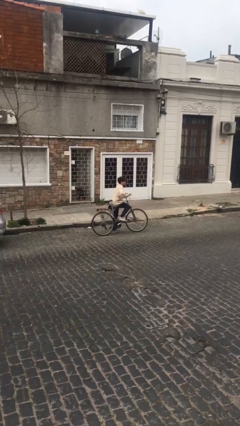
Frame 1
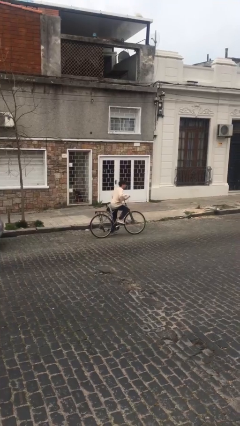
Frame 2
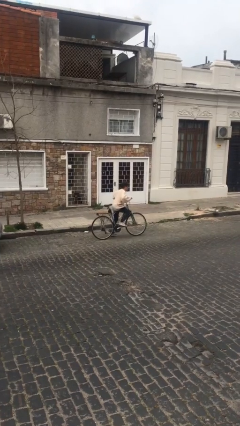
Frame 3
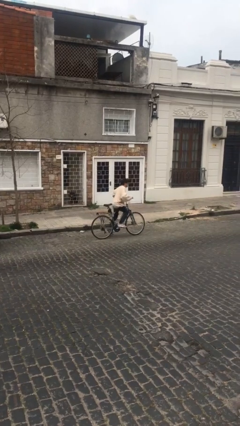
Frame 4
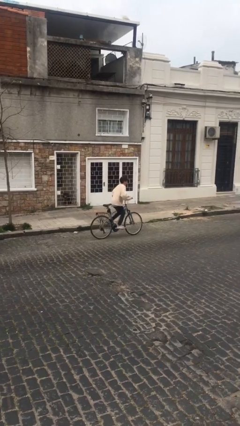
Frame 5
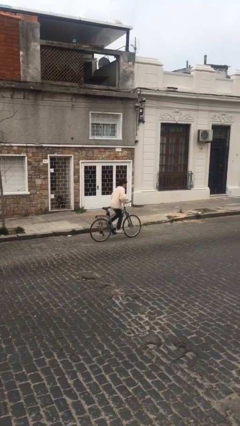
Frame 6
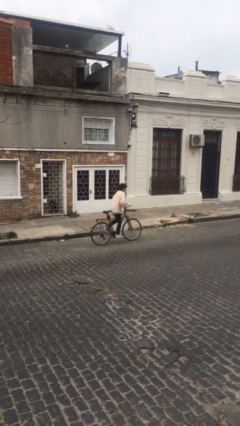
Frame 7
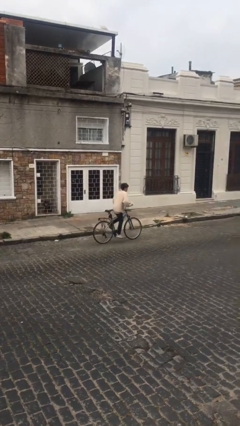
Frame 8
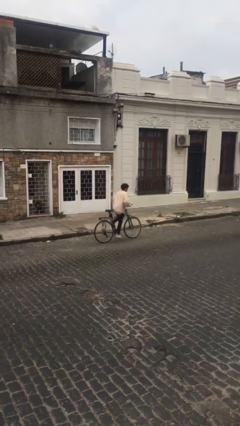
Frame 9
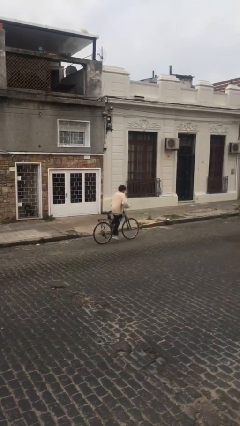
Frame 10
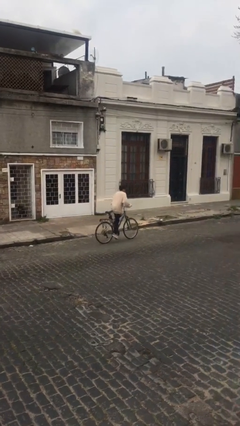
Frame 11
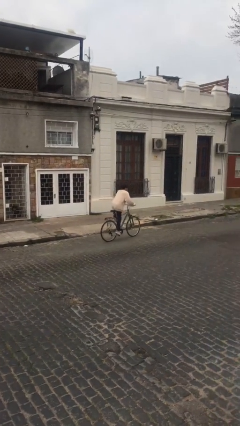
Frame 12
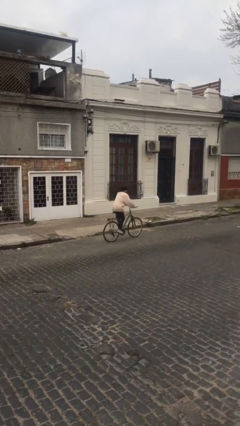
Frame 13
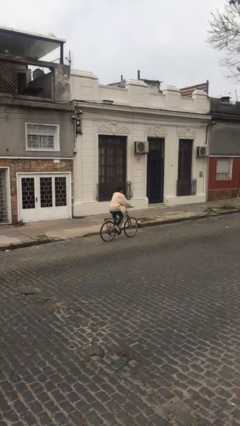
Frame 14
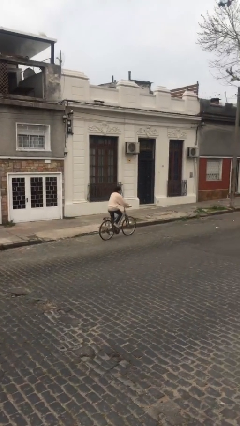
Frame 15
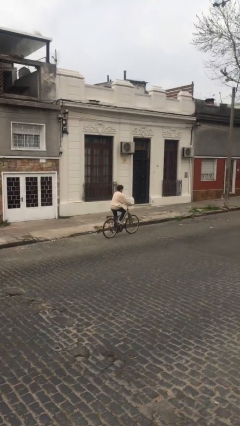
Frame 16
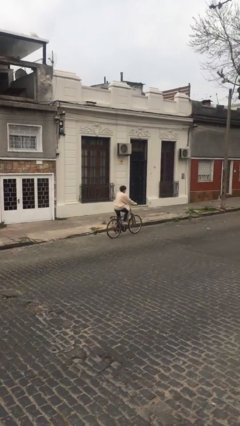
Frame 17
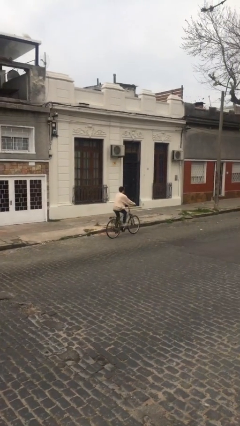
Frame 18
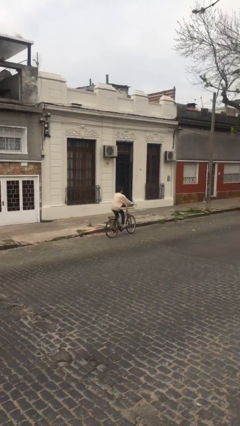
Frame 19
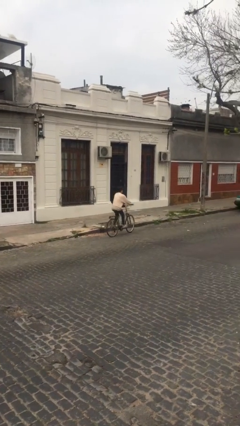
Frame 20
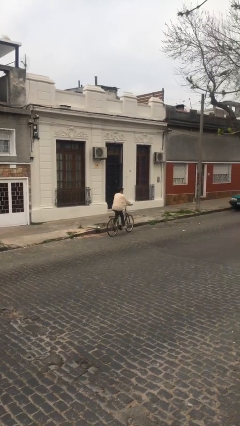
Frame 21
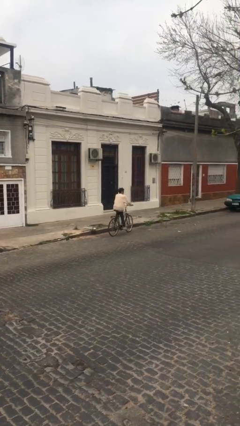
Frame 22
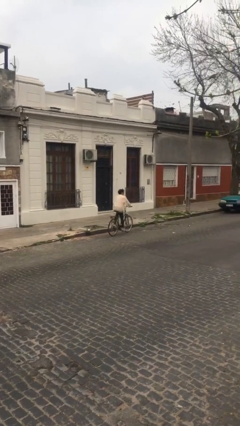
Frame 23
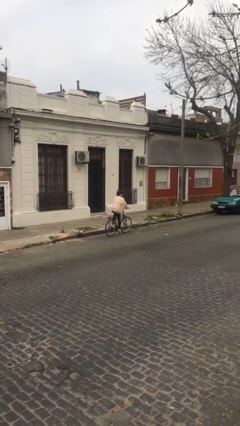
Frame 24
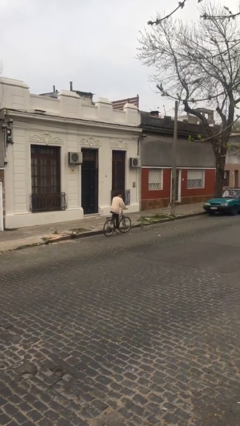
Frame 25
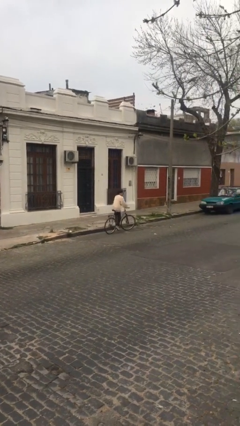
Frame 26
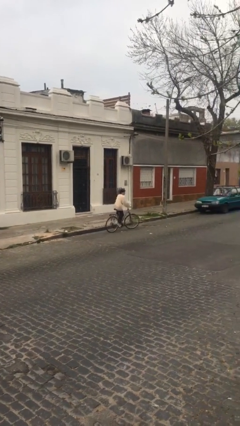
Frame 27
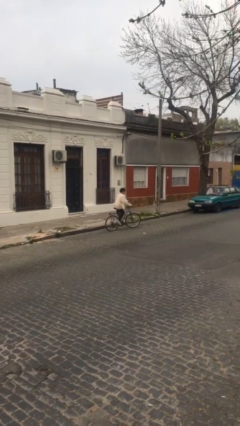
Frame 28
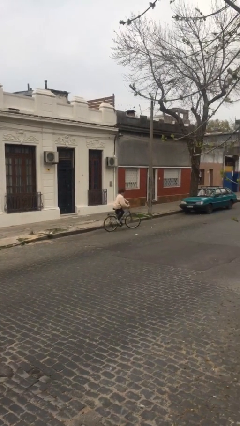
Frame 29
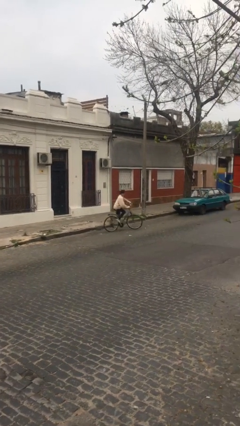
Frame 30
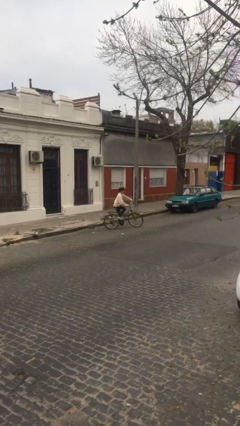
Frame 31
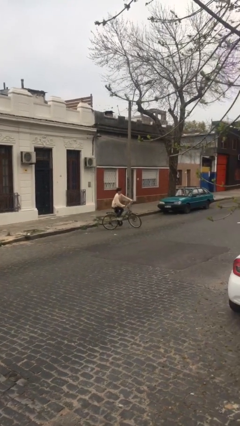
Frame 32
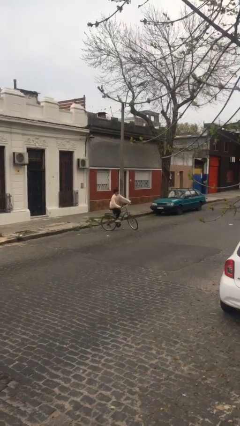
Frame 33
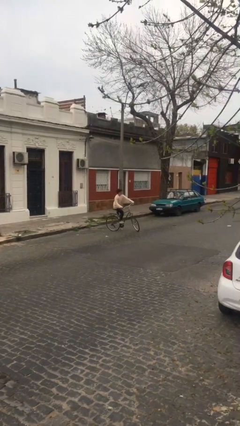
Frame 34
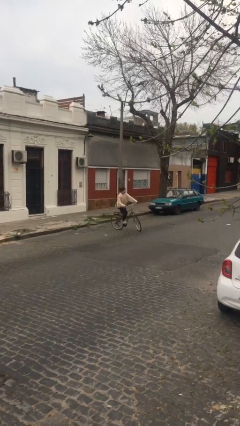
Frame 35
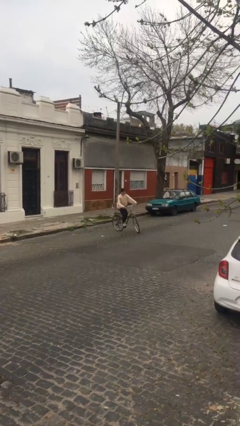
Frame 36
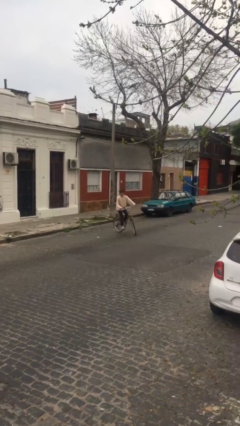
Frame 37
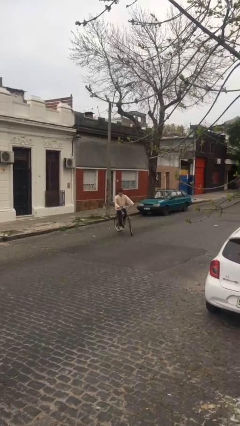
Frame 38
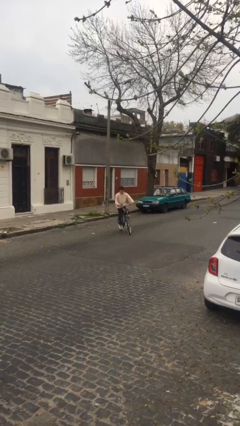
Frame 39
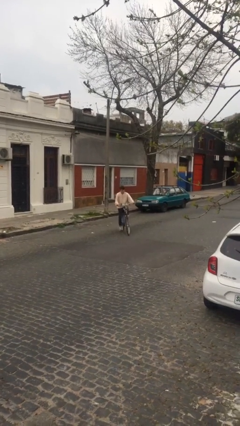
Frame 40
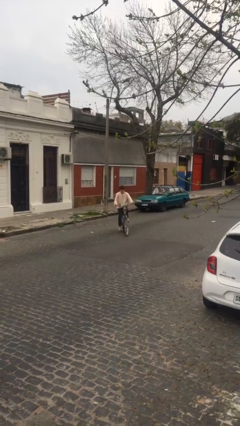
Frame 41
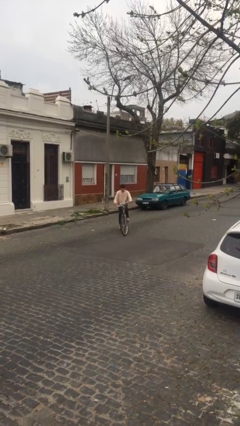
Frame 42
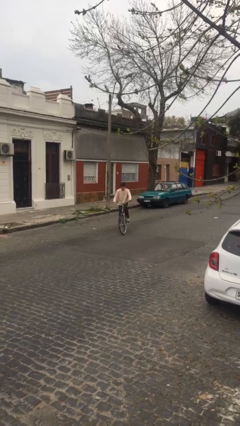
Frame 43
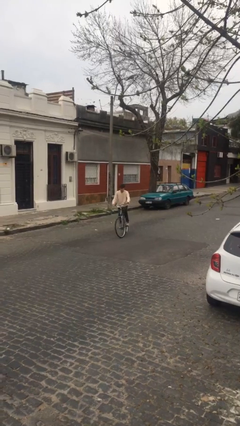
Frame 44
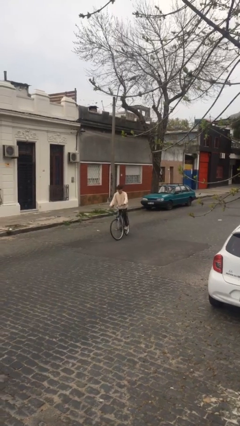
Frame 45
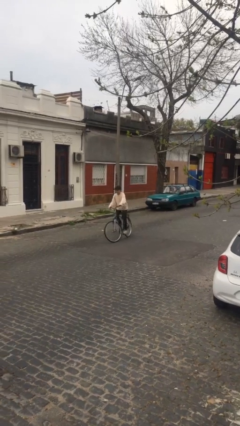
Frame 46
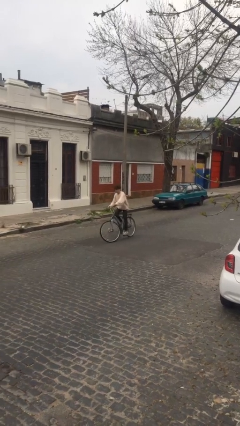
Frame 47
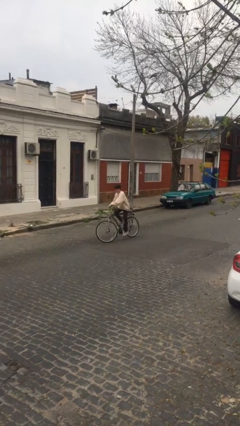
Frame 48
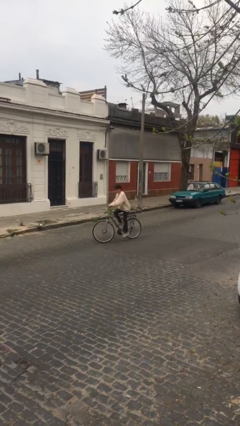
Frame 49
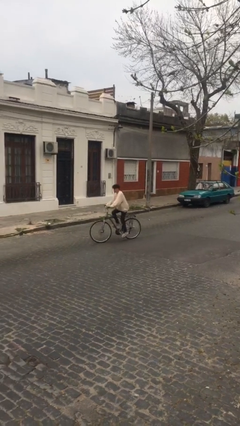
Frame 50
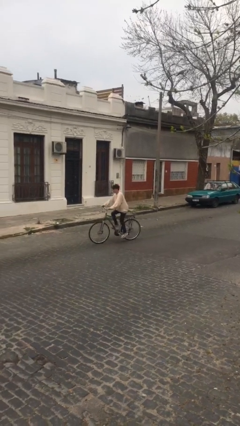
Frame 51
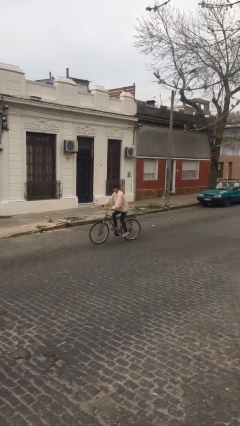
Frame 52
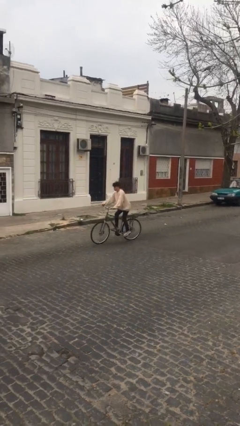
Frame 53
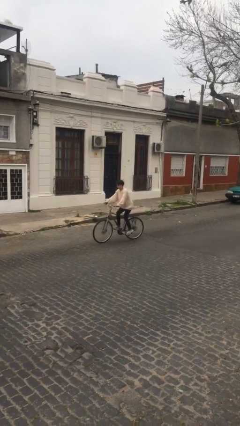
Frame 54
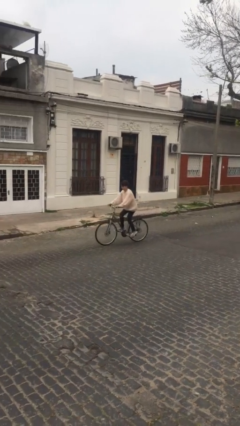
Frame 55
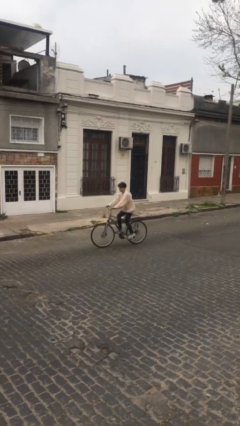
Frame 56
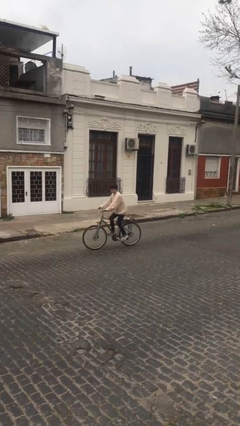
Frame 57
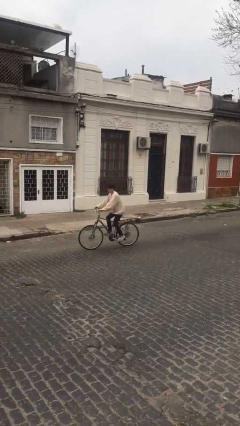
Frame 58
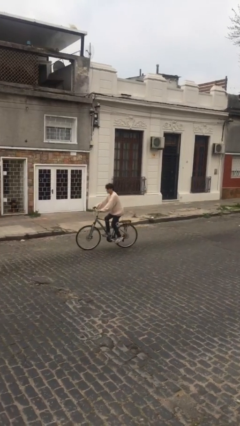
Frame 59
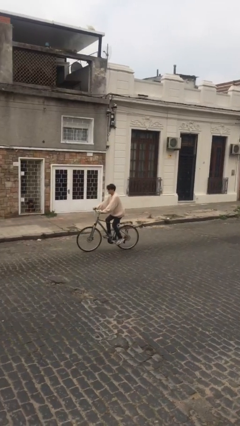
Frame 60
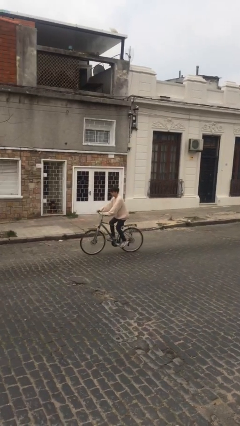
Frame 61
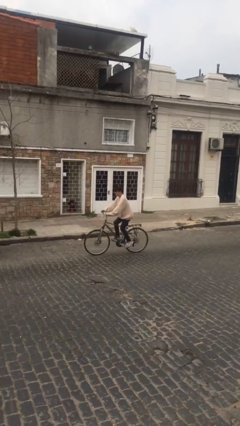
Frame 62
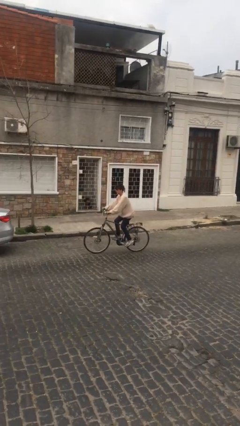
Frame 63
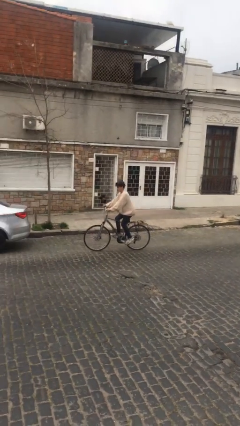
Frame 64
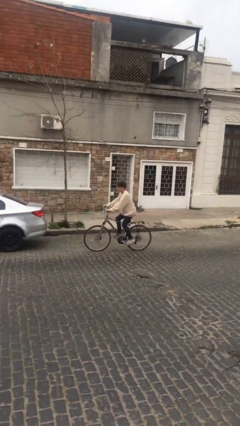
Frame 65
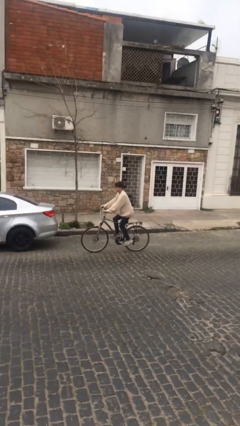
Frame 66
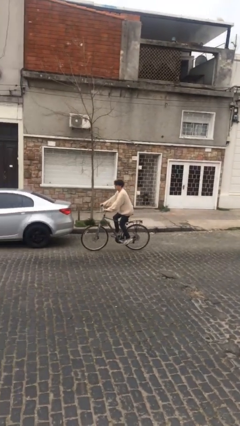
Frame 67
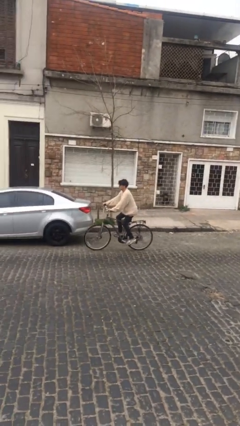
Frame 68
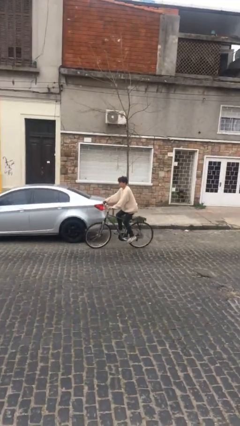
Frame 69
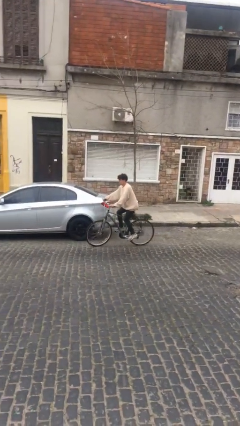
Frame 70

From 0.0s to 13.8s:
person rides bicycle

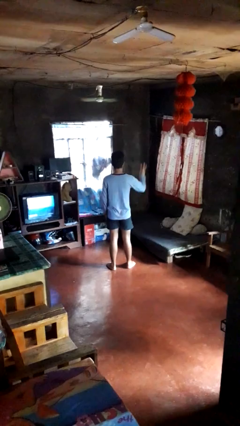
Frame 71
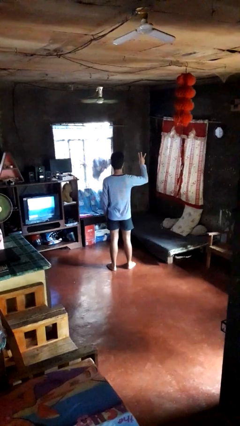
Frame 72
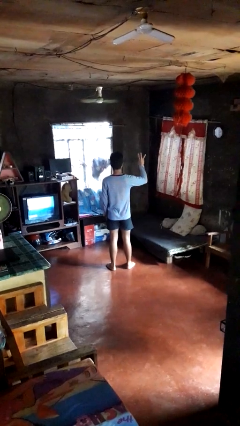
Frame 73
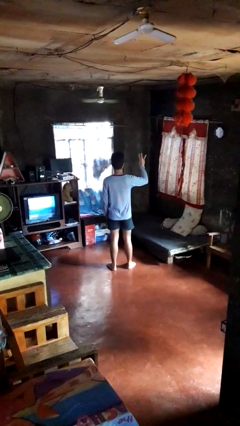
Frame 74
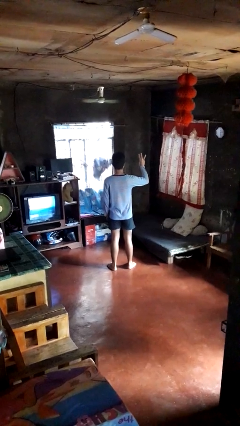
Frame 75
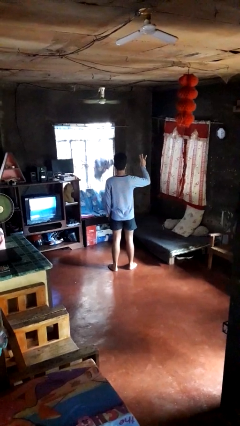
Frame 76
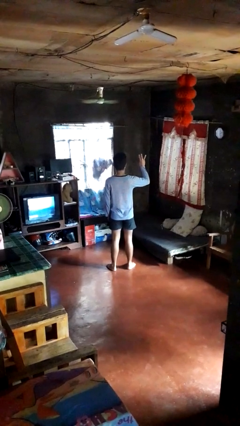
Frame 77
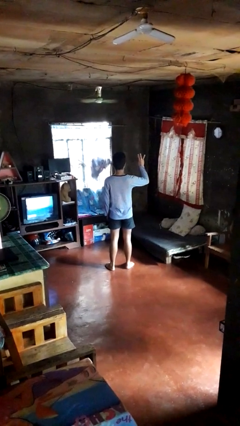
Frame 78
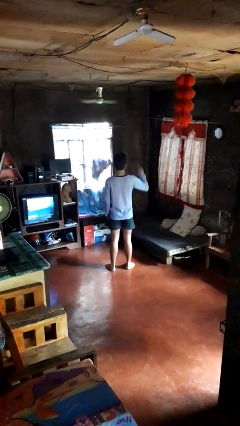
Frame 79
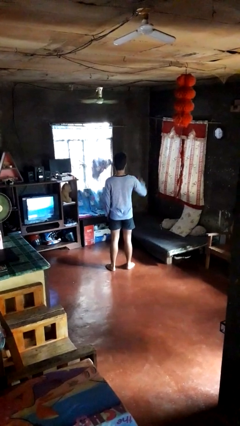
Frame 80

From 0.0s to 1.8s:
person gestures number three

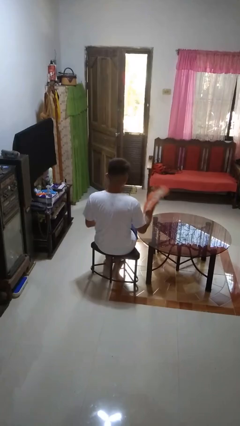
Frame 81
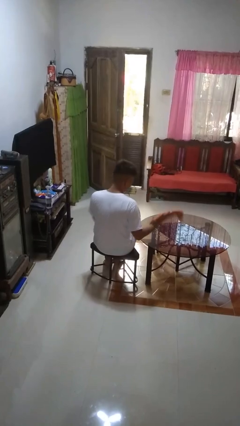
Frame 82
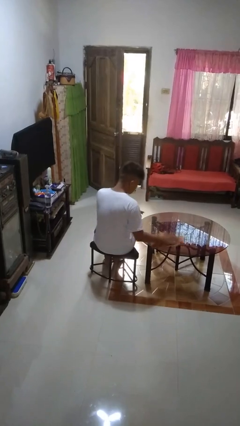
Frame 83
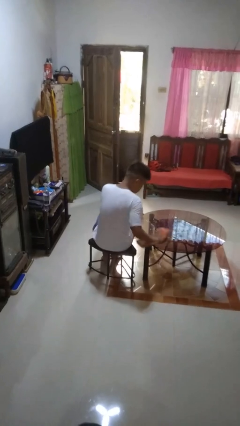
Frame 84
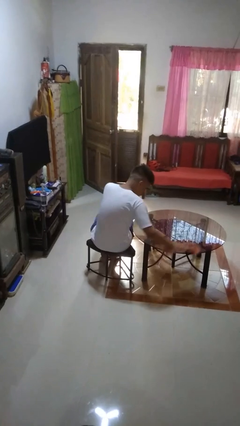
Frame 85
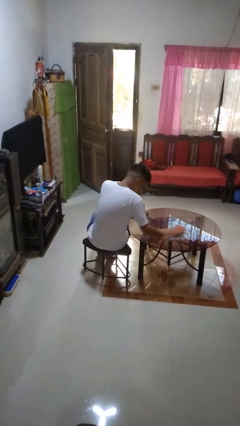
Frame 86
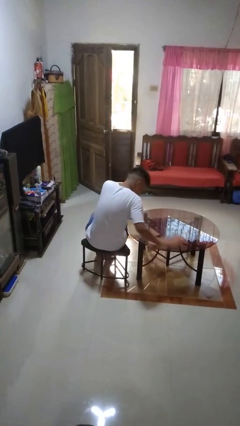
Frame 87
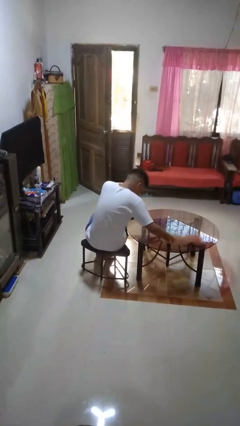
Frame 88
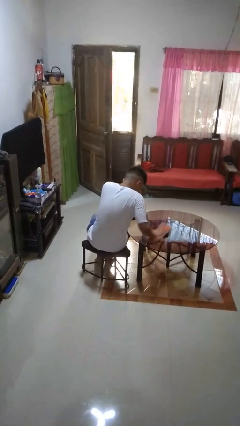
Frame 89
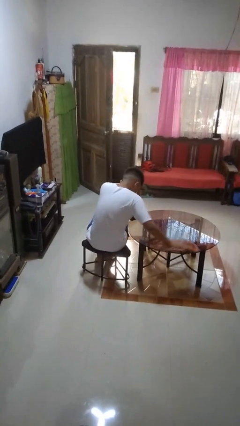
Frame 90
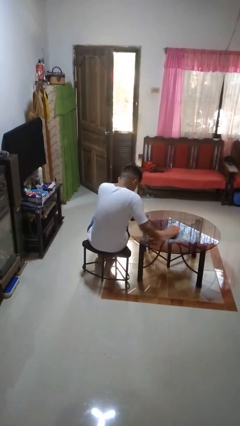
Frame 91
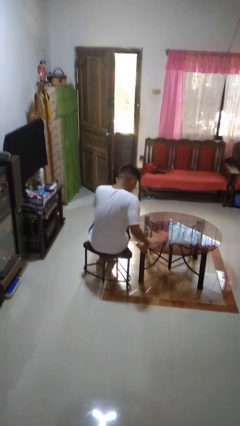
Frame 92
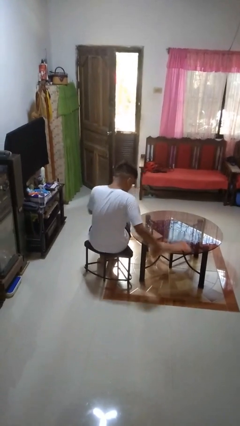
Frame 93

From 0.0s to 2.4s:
person cleans table with rag
